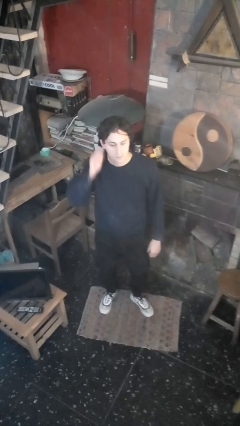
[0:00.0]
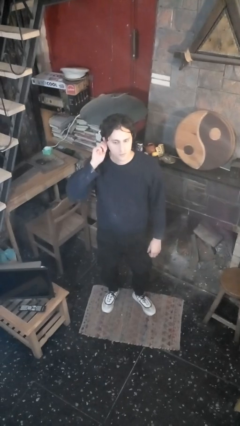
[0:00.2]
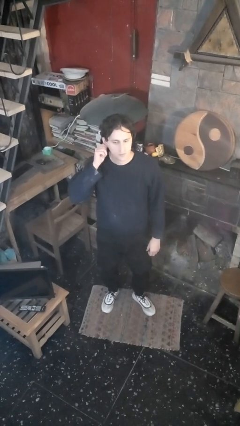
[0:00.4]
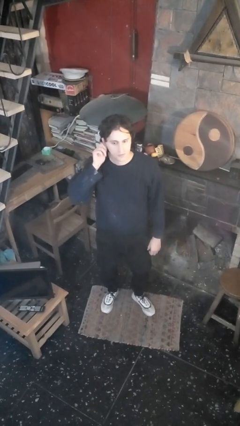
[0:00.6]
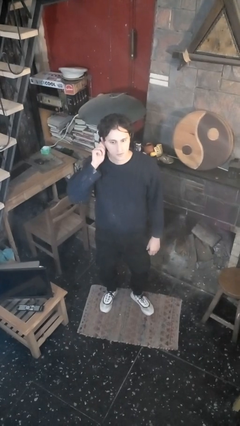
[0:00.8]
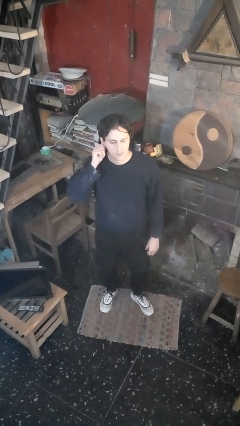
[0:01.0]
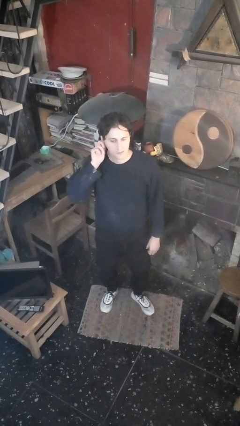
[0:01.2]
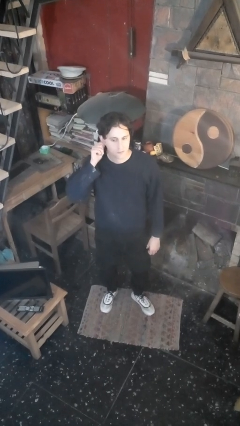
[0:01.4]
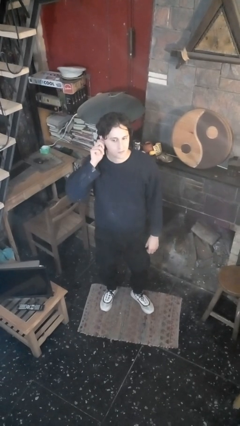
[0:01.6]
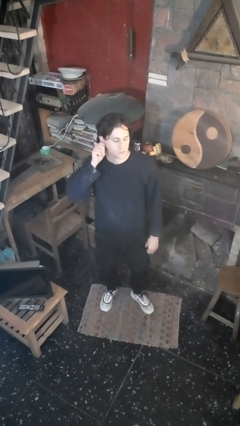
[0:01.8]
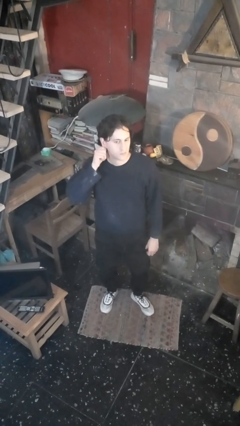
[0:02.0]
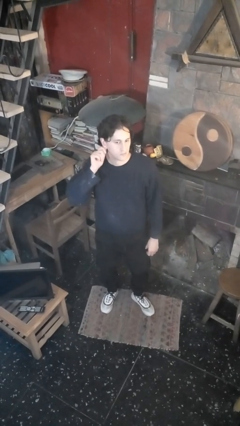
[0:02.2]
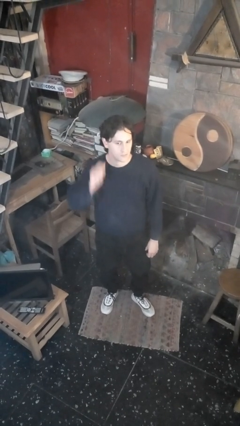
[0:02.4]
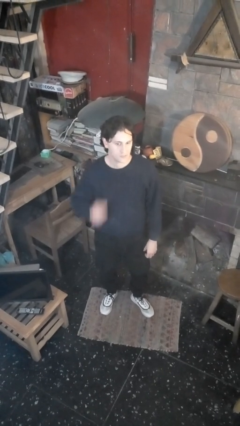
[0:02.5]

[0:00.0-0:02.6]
person touches earlobe

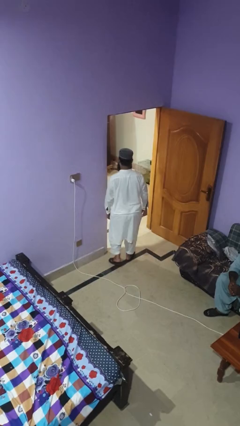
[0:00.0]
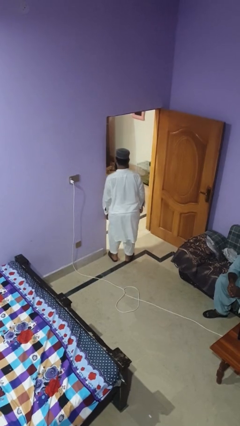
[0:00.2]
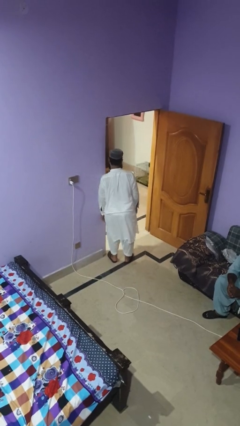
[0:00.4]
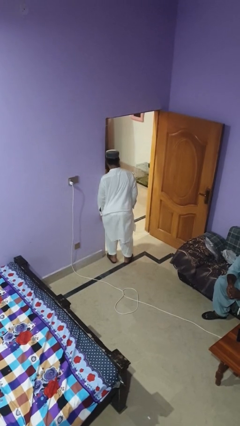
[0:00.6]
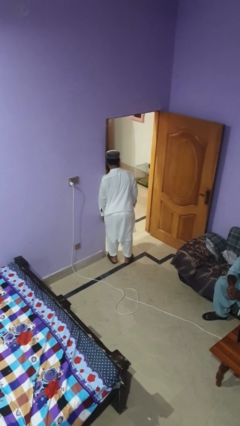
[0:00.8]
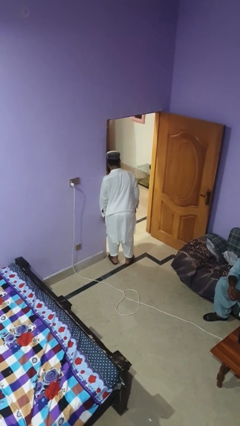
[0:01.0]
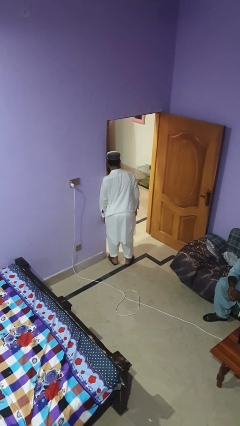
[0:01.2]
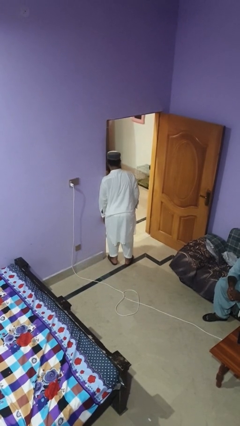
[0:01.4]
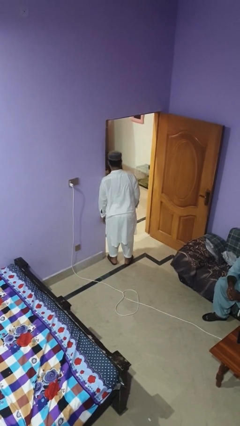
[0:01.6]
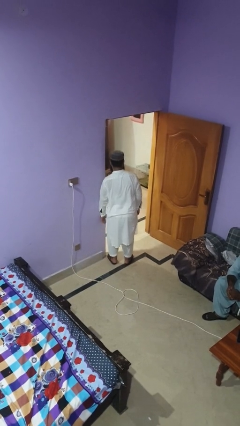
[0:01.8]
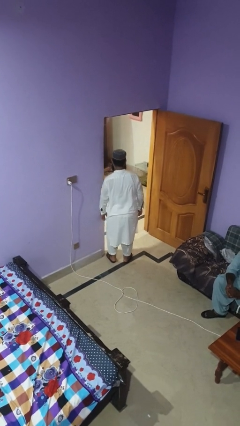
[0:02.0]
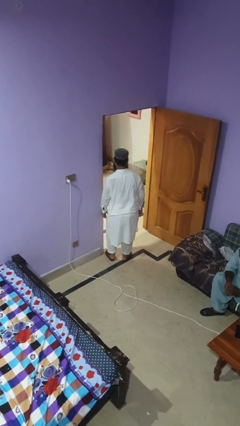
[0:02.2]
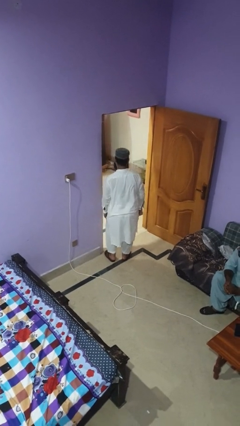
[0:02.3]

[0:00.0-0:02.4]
person bumps into wall

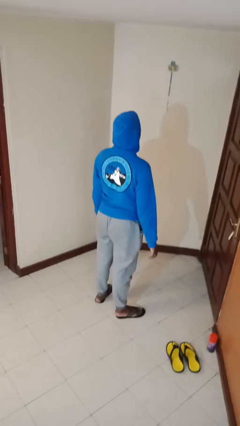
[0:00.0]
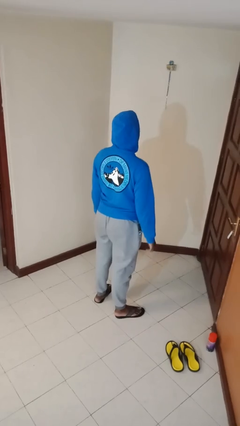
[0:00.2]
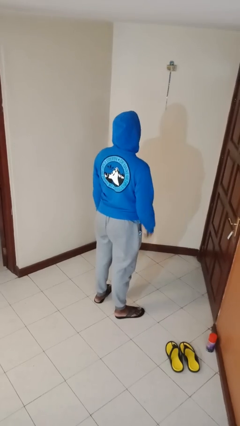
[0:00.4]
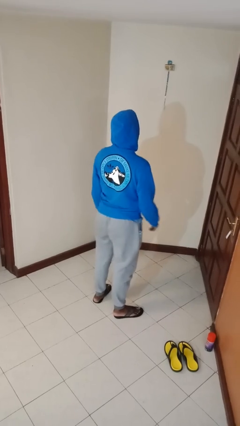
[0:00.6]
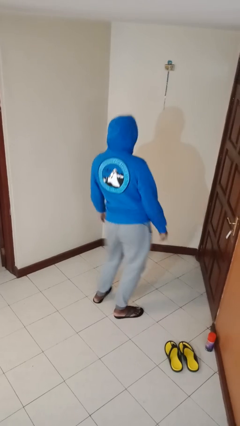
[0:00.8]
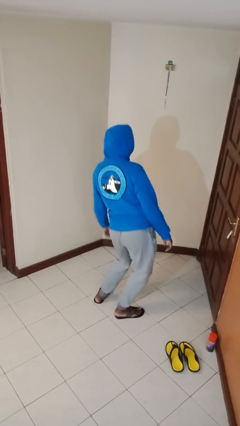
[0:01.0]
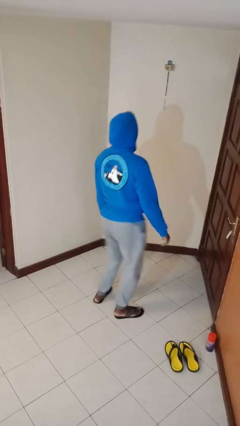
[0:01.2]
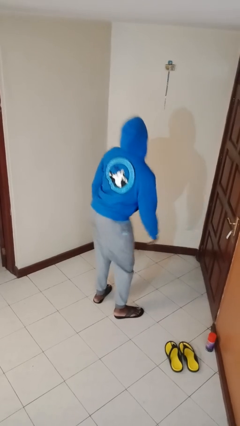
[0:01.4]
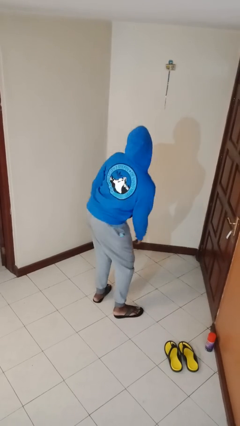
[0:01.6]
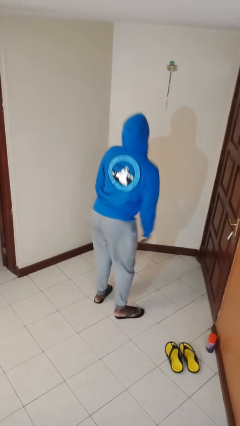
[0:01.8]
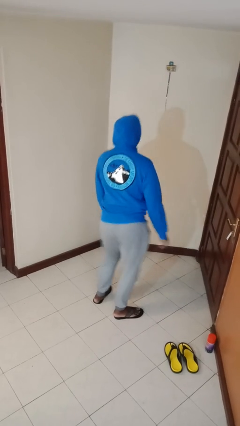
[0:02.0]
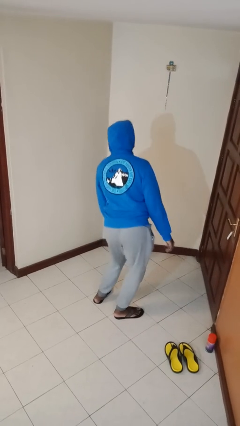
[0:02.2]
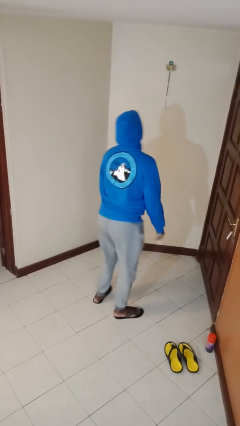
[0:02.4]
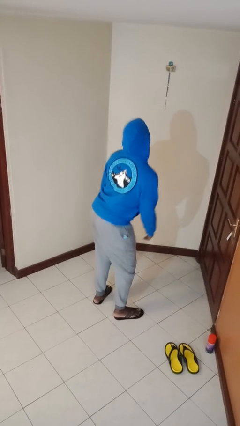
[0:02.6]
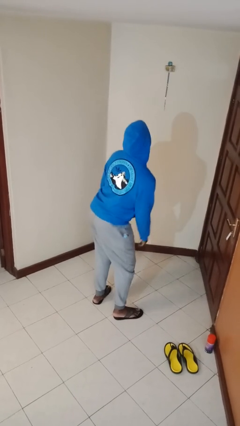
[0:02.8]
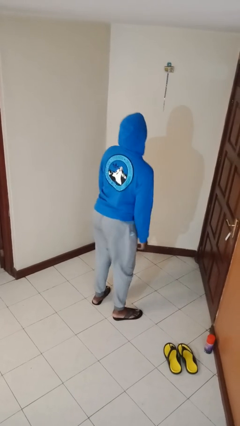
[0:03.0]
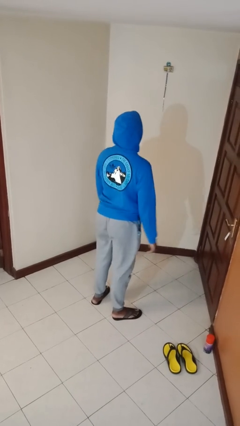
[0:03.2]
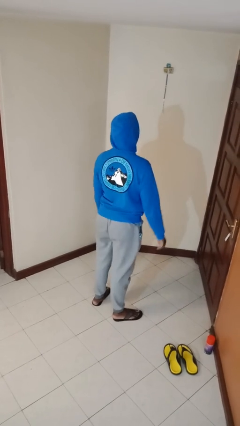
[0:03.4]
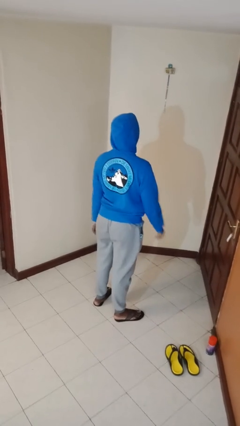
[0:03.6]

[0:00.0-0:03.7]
person wiggles hips

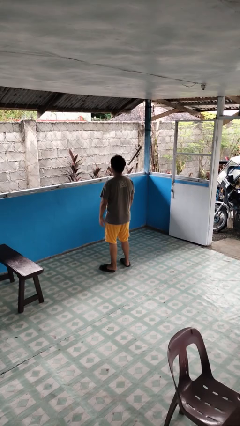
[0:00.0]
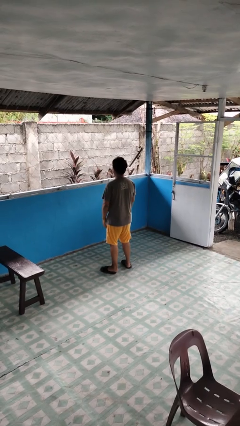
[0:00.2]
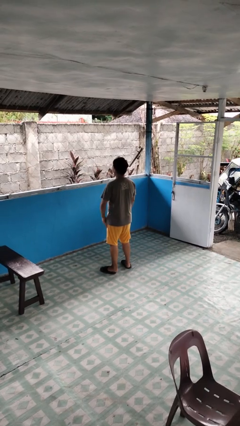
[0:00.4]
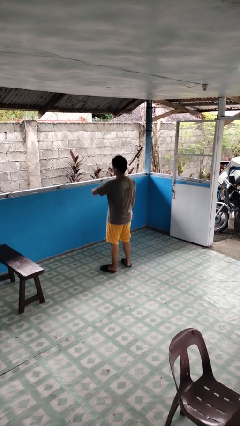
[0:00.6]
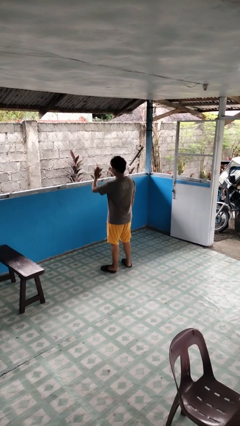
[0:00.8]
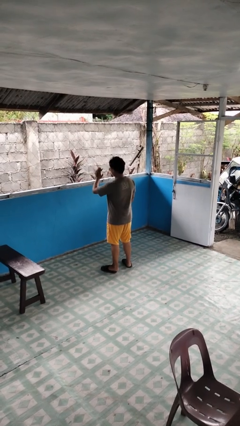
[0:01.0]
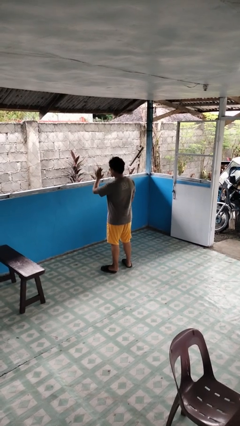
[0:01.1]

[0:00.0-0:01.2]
person gestures stop

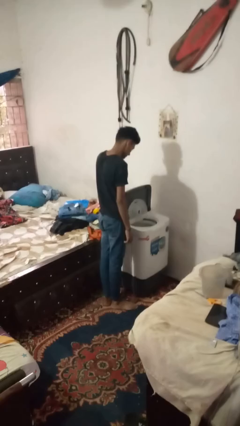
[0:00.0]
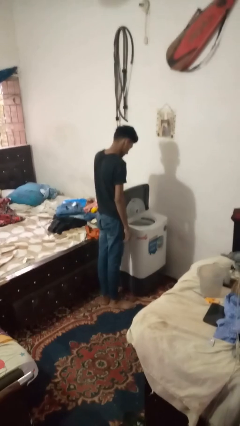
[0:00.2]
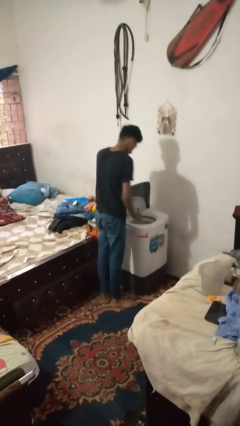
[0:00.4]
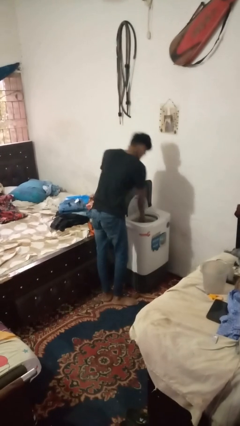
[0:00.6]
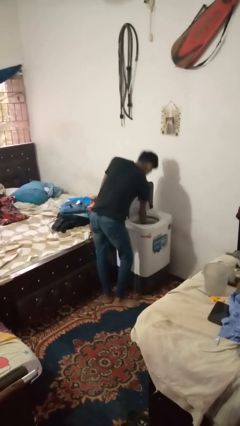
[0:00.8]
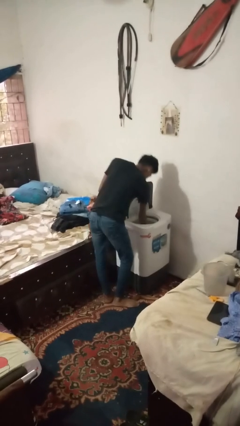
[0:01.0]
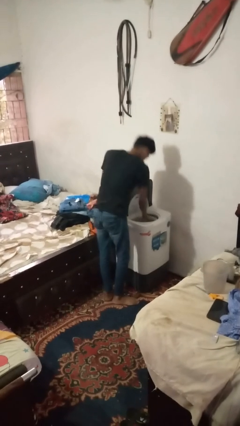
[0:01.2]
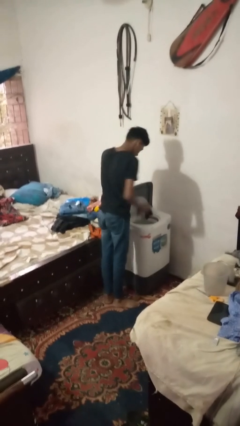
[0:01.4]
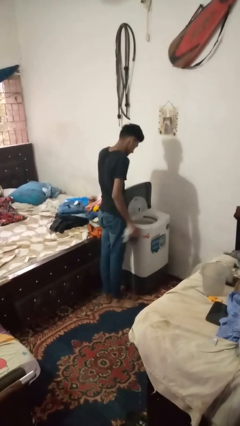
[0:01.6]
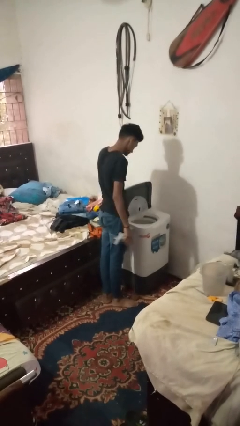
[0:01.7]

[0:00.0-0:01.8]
person unloads dryer

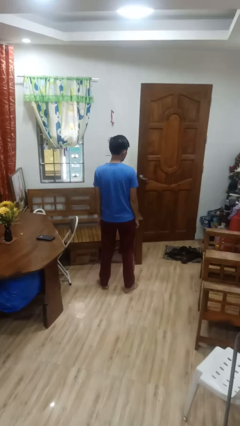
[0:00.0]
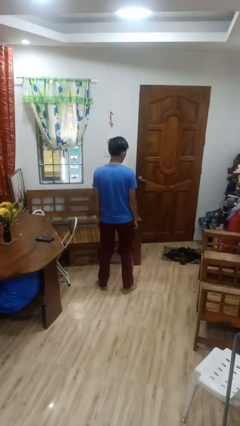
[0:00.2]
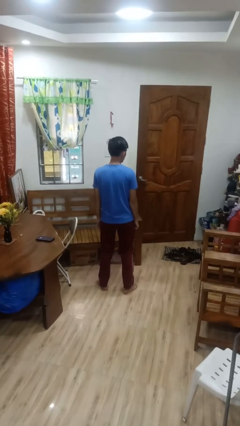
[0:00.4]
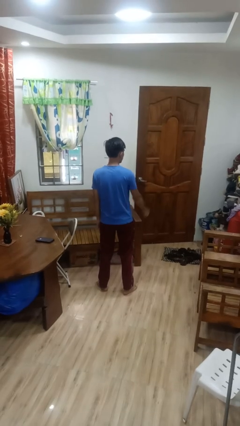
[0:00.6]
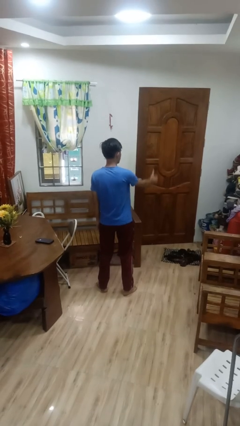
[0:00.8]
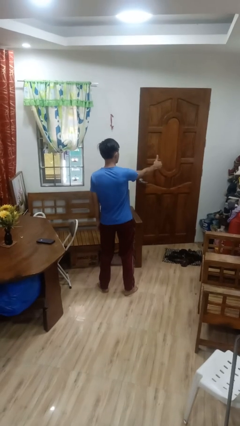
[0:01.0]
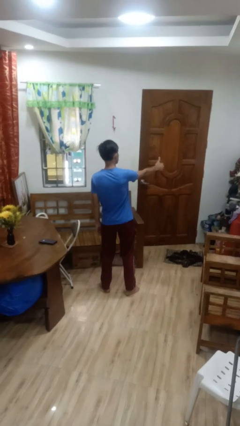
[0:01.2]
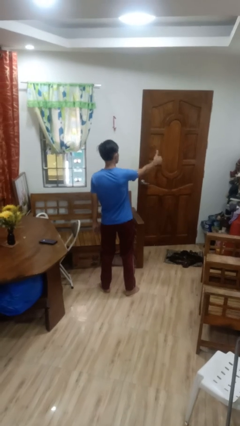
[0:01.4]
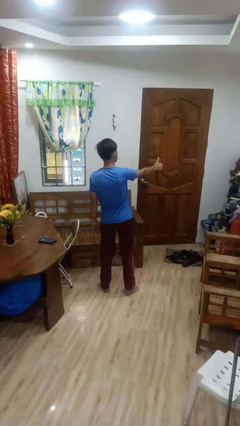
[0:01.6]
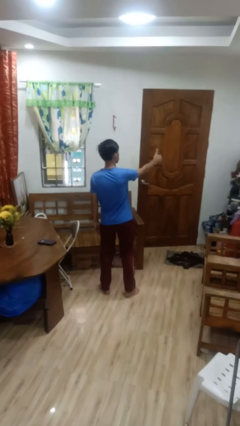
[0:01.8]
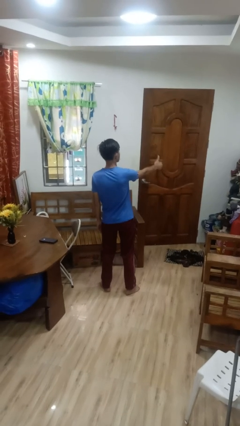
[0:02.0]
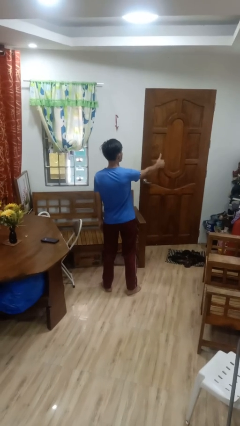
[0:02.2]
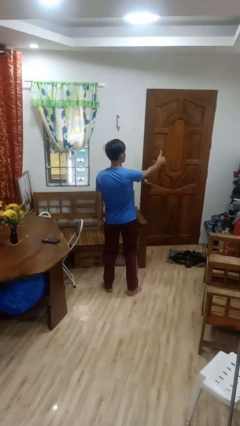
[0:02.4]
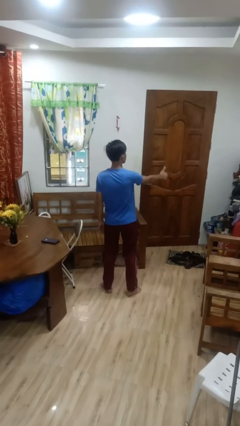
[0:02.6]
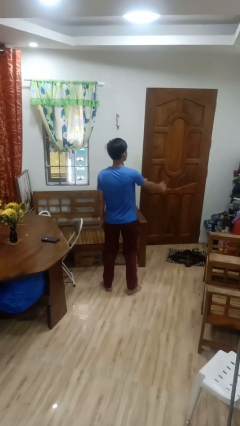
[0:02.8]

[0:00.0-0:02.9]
person gestures thumbs up

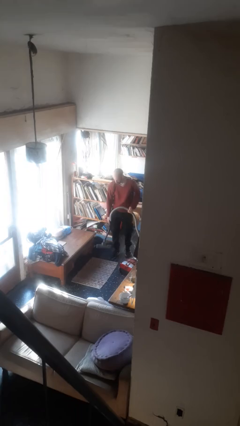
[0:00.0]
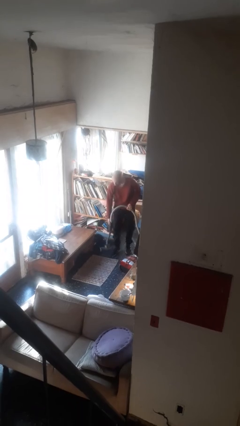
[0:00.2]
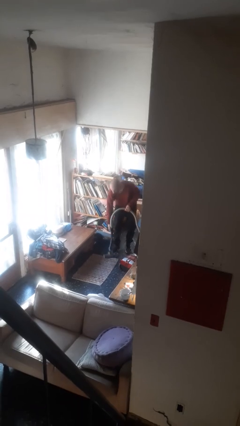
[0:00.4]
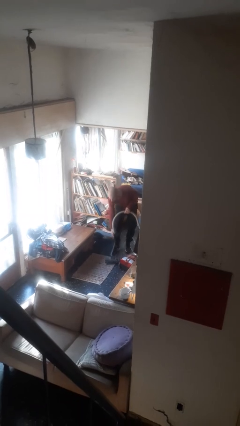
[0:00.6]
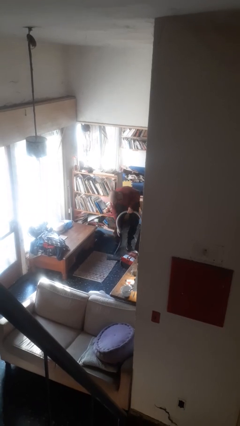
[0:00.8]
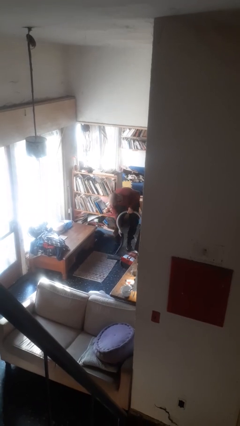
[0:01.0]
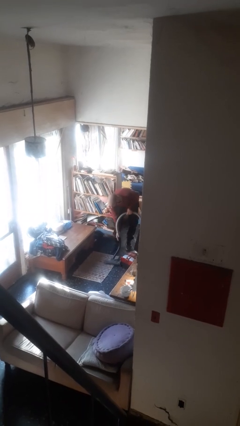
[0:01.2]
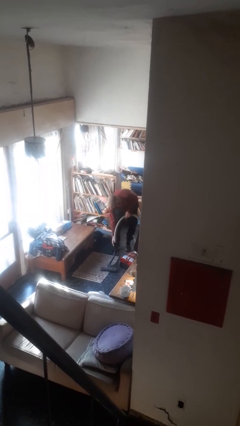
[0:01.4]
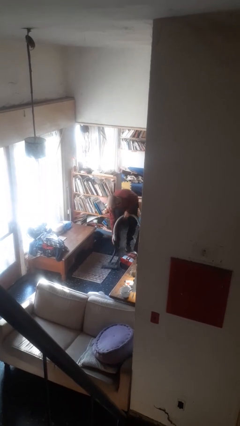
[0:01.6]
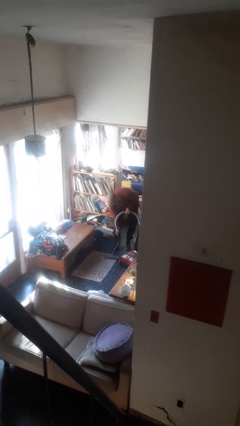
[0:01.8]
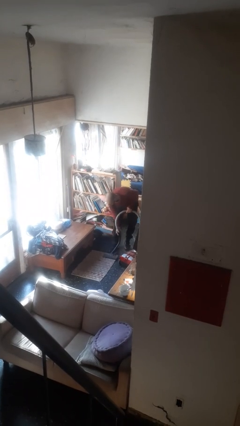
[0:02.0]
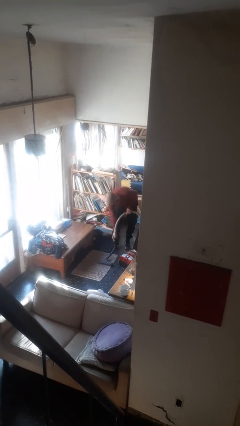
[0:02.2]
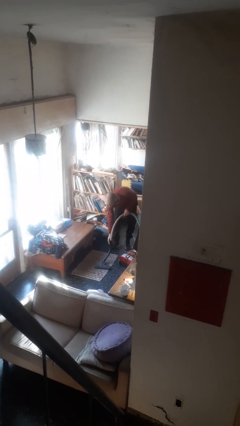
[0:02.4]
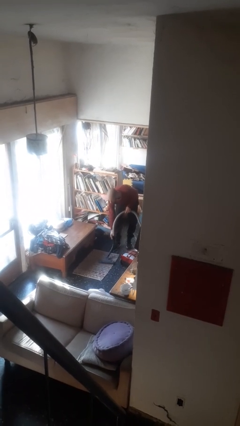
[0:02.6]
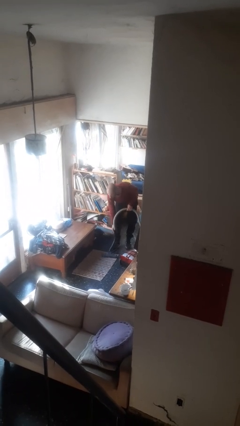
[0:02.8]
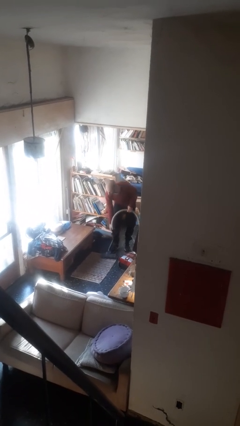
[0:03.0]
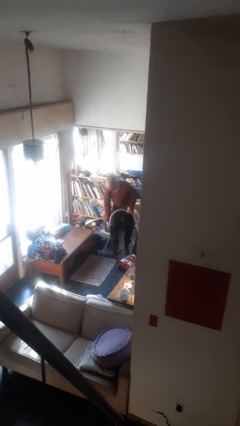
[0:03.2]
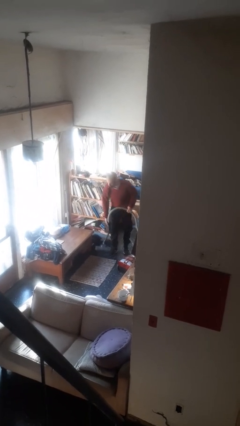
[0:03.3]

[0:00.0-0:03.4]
person vacuums carpet
